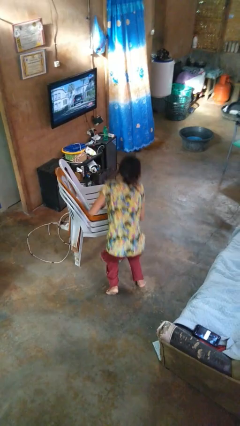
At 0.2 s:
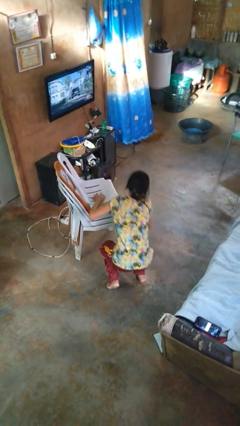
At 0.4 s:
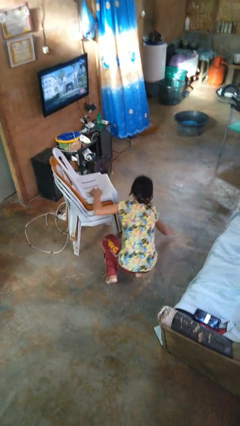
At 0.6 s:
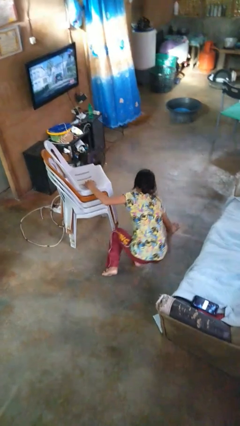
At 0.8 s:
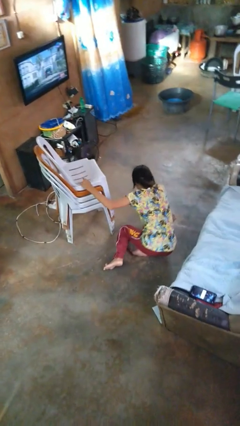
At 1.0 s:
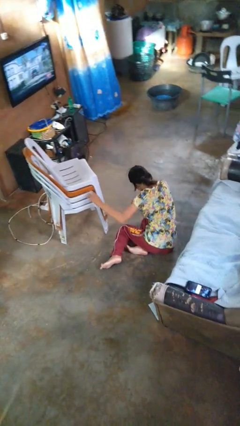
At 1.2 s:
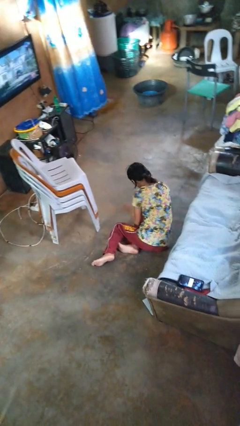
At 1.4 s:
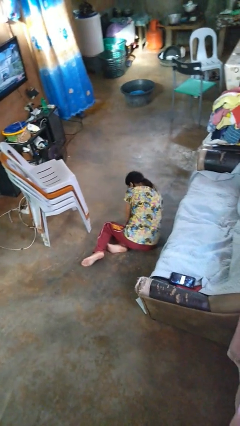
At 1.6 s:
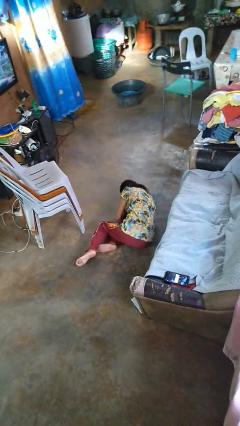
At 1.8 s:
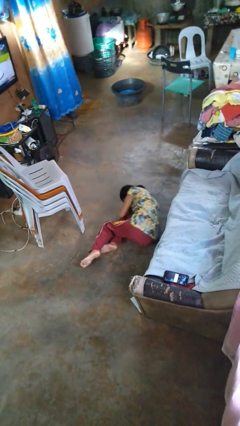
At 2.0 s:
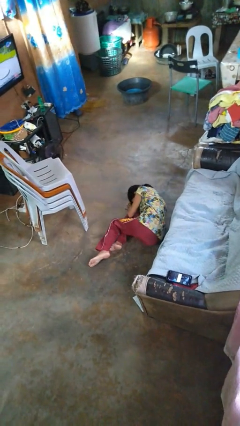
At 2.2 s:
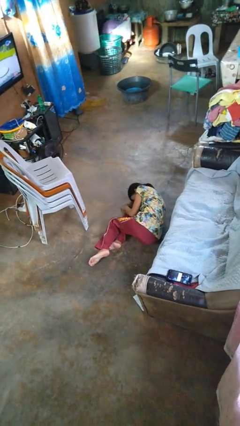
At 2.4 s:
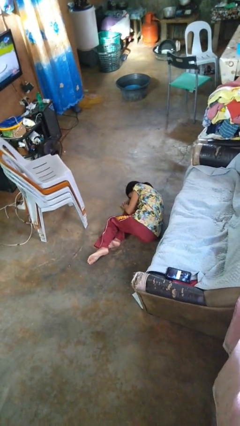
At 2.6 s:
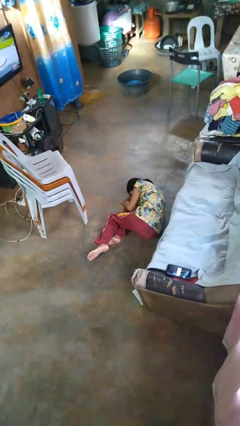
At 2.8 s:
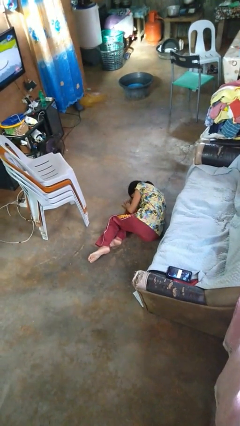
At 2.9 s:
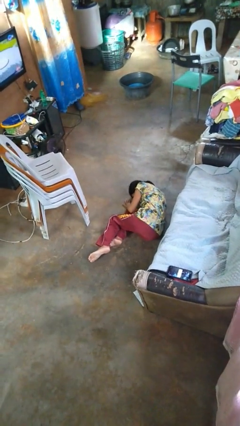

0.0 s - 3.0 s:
person lies down on floor

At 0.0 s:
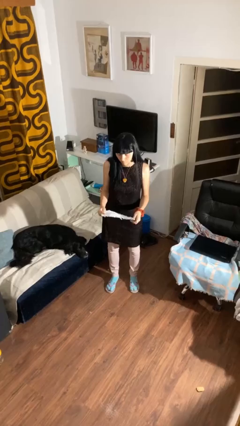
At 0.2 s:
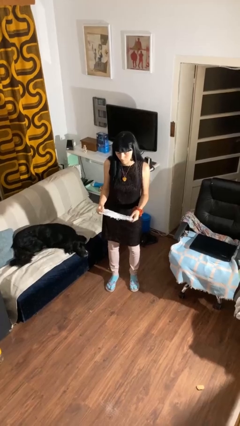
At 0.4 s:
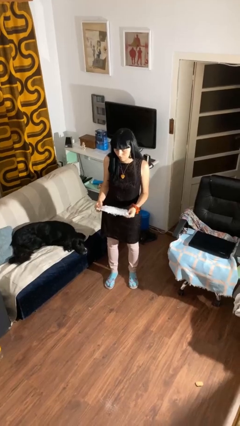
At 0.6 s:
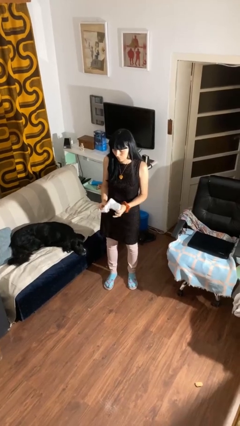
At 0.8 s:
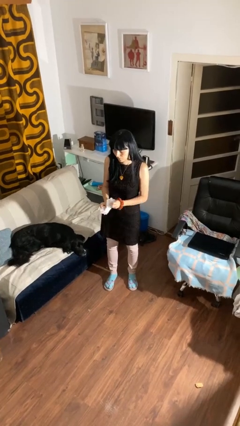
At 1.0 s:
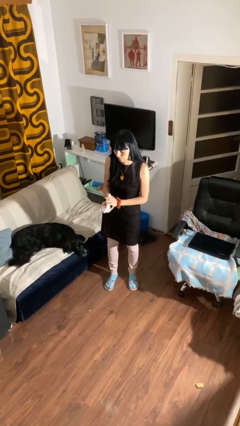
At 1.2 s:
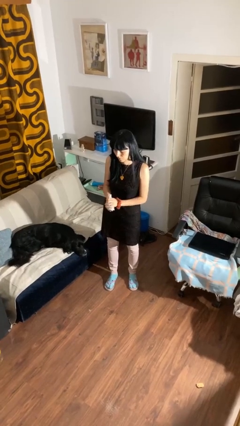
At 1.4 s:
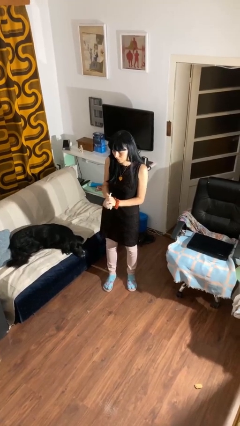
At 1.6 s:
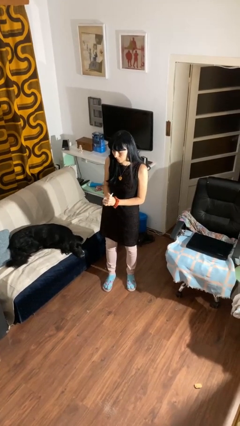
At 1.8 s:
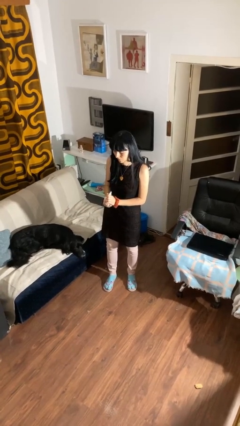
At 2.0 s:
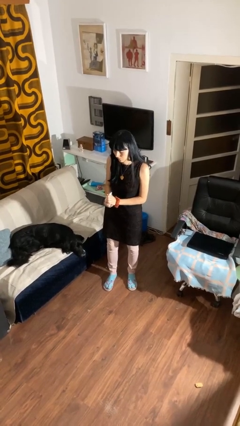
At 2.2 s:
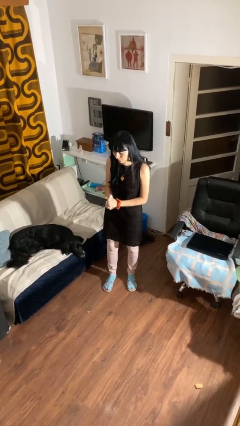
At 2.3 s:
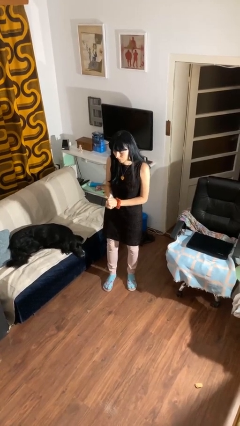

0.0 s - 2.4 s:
person crumples paper

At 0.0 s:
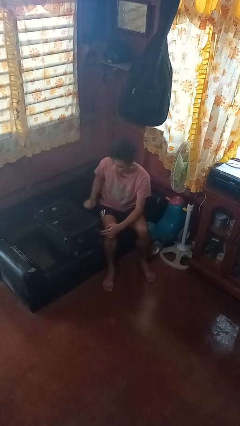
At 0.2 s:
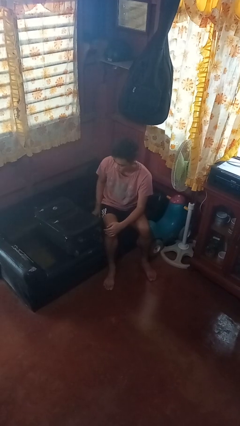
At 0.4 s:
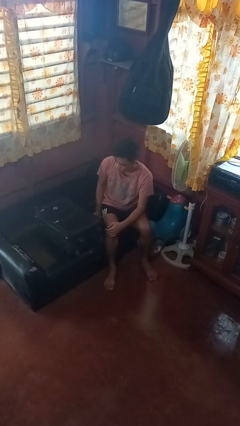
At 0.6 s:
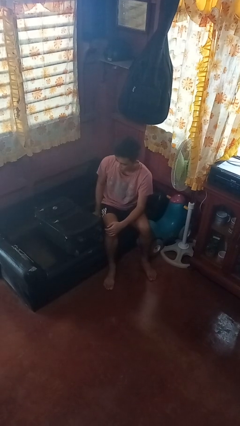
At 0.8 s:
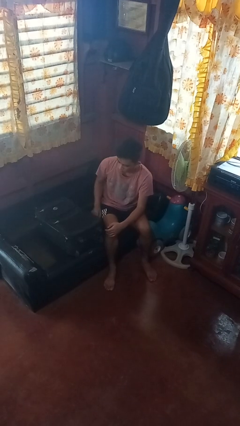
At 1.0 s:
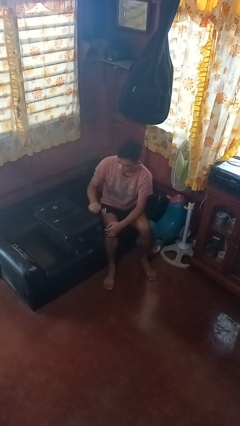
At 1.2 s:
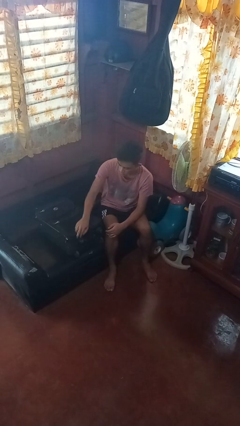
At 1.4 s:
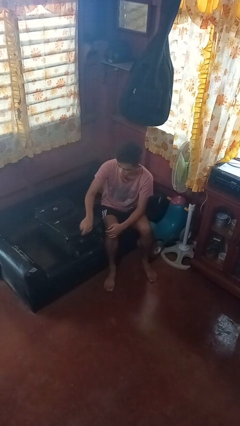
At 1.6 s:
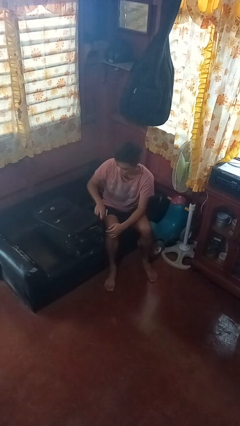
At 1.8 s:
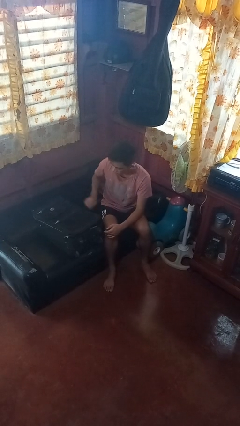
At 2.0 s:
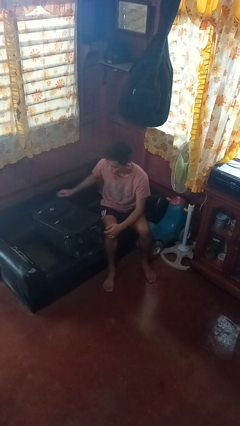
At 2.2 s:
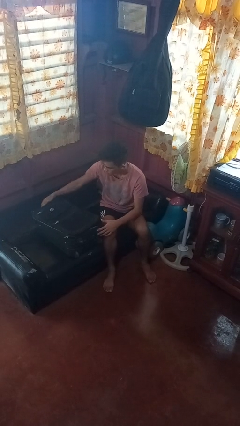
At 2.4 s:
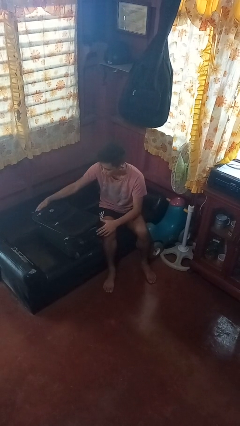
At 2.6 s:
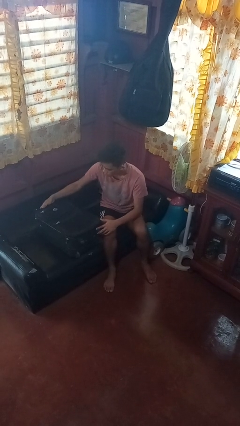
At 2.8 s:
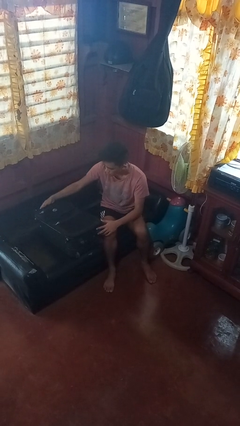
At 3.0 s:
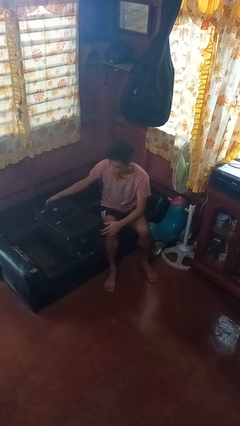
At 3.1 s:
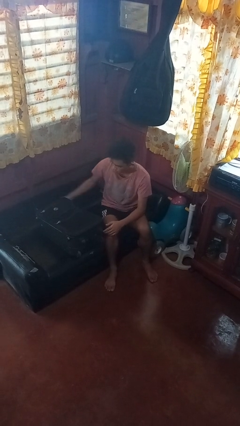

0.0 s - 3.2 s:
person closes suitcase

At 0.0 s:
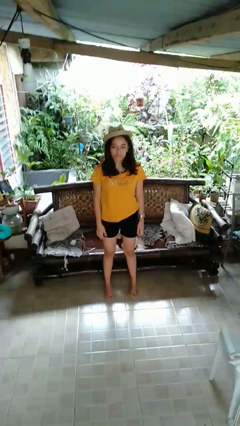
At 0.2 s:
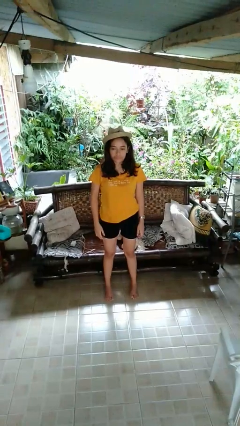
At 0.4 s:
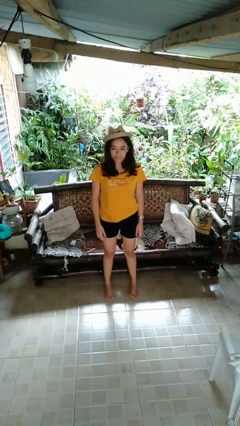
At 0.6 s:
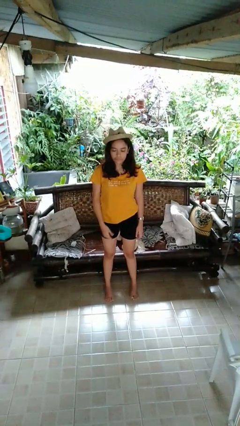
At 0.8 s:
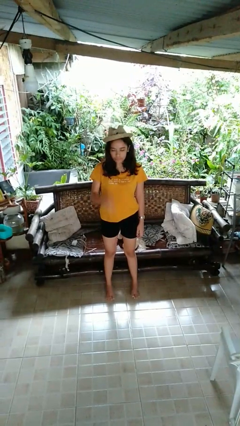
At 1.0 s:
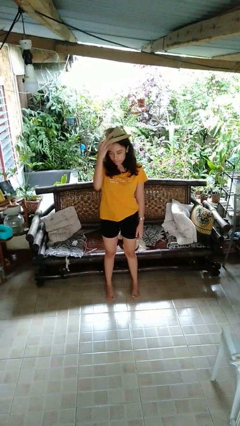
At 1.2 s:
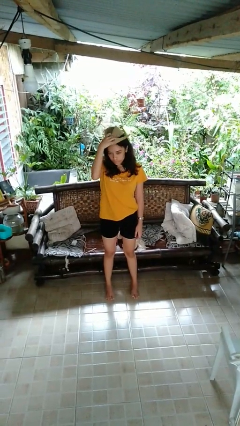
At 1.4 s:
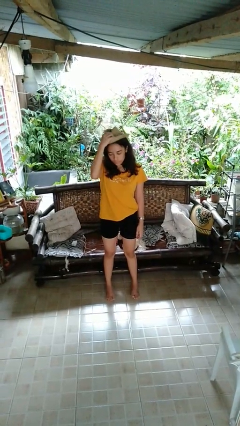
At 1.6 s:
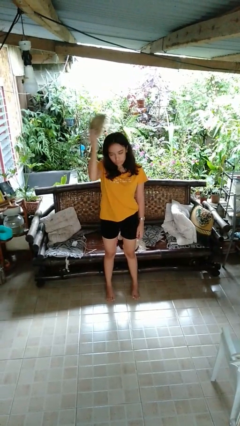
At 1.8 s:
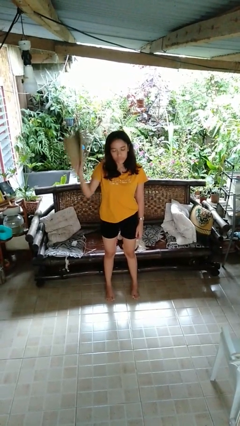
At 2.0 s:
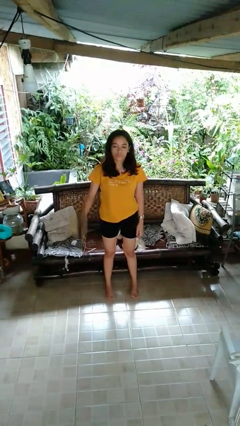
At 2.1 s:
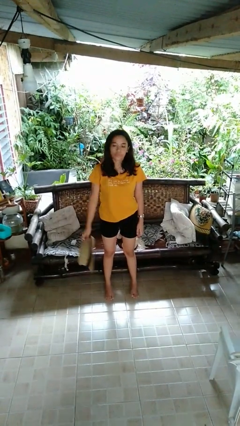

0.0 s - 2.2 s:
person takes off hat

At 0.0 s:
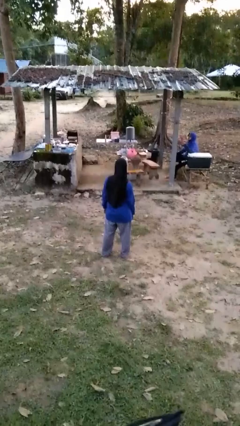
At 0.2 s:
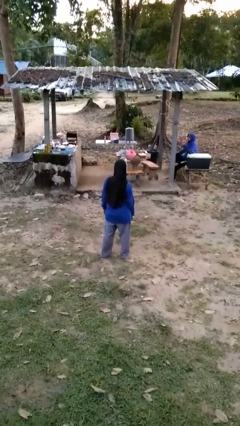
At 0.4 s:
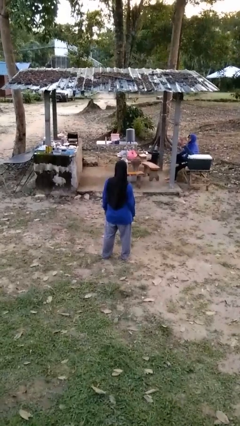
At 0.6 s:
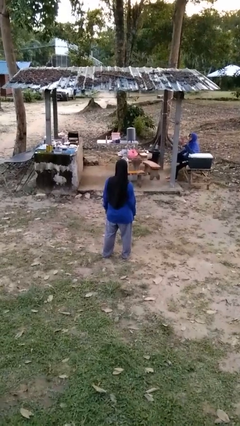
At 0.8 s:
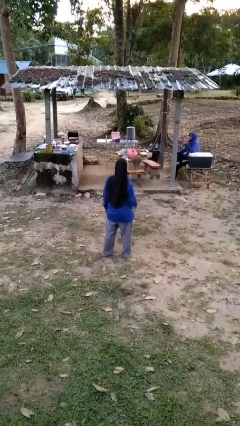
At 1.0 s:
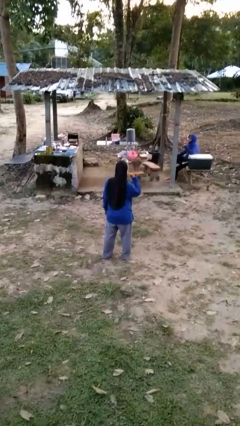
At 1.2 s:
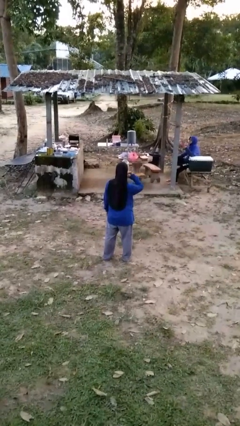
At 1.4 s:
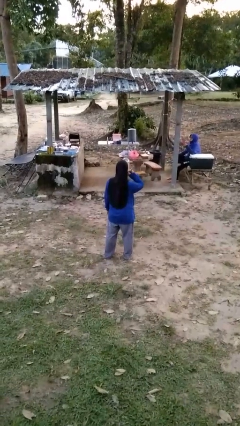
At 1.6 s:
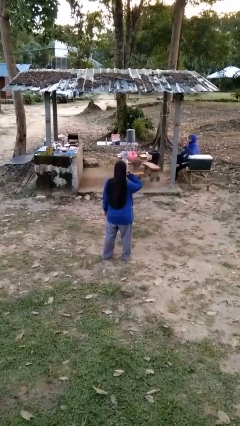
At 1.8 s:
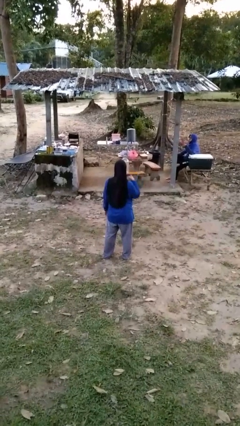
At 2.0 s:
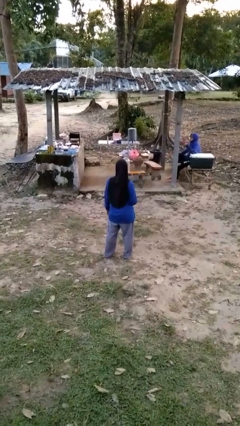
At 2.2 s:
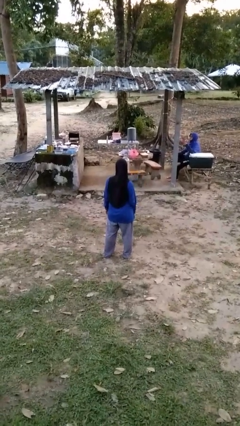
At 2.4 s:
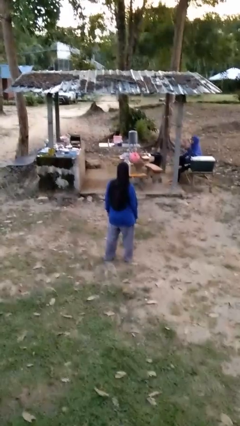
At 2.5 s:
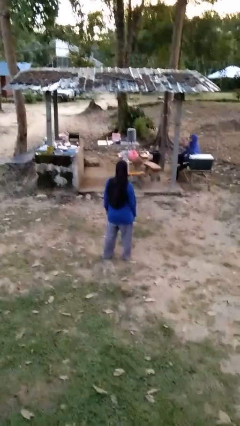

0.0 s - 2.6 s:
person gestures call me

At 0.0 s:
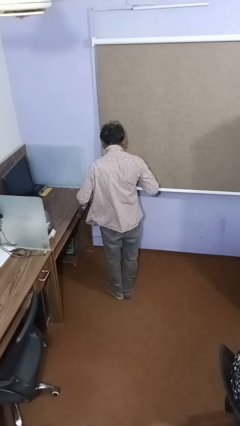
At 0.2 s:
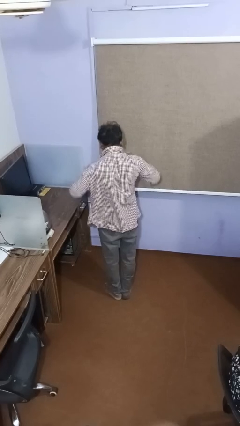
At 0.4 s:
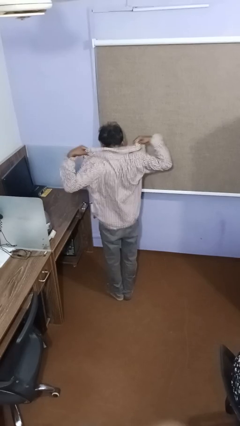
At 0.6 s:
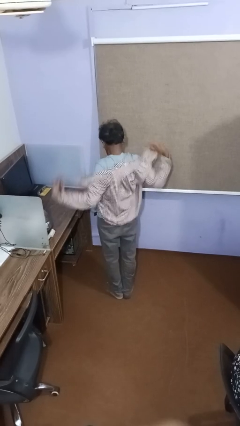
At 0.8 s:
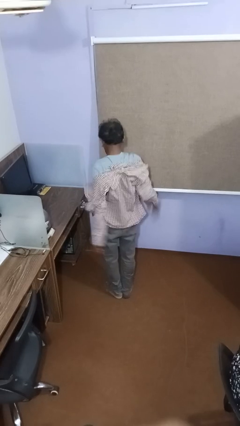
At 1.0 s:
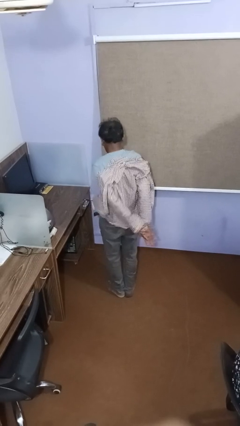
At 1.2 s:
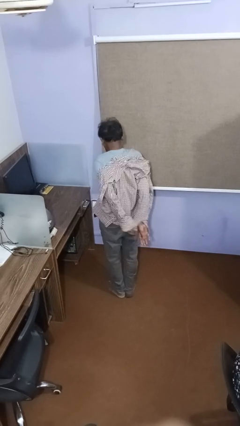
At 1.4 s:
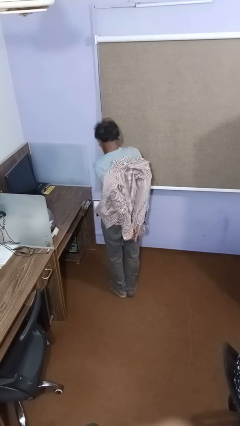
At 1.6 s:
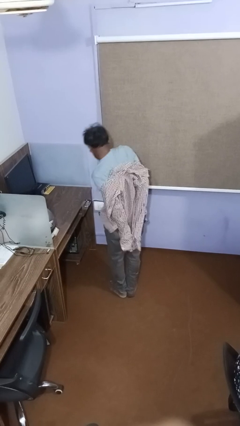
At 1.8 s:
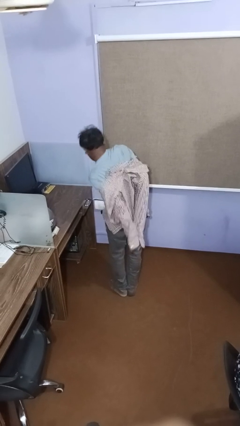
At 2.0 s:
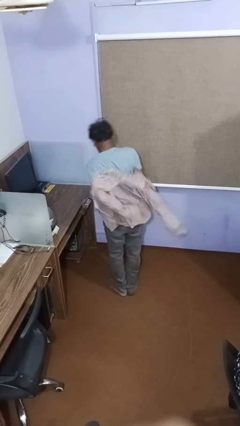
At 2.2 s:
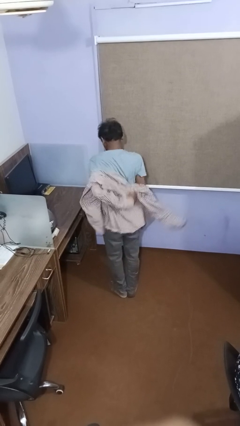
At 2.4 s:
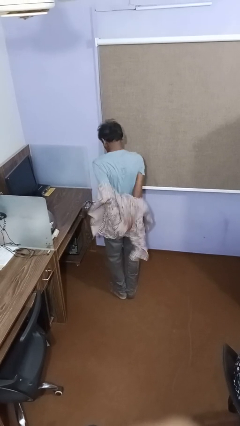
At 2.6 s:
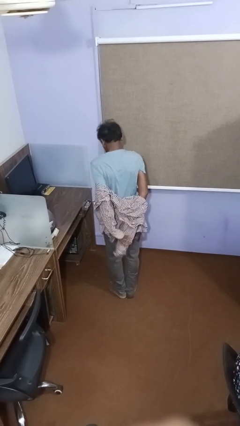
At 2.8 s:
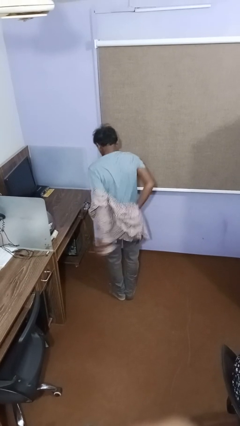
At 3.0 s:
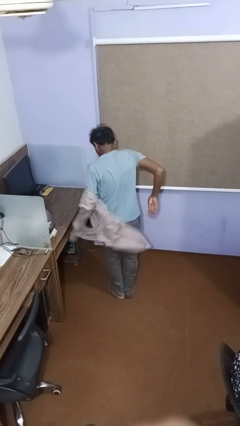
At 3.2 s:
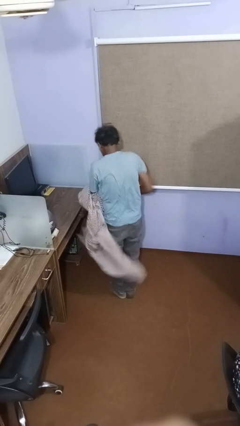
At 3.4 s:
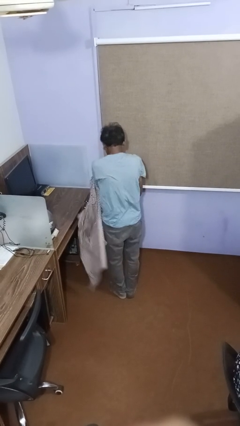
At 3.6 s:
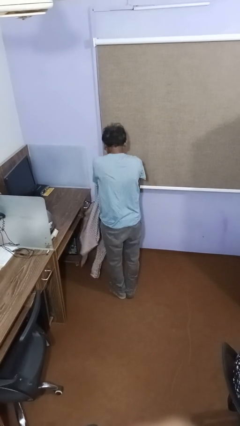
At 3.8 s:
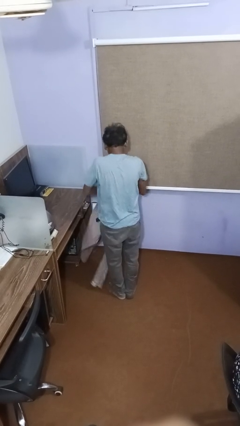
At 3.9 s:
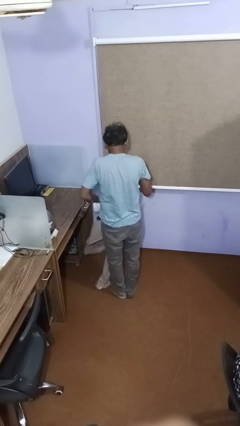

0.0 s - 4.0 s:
person takes off shirt
